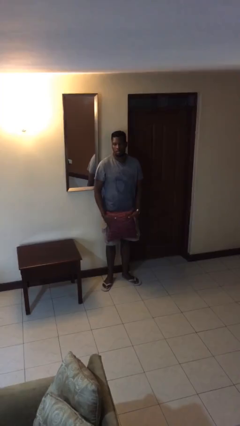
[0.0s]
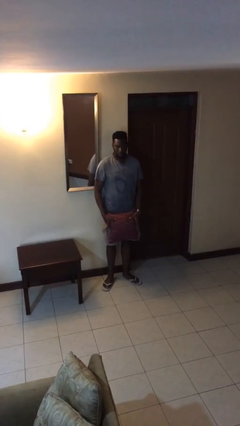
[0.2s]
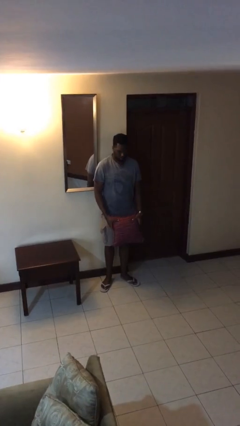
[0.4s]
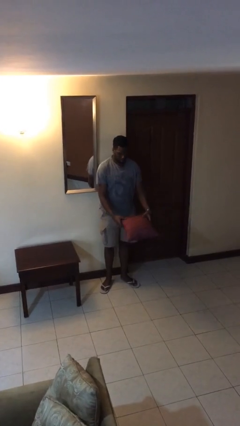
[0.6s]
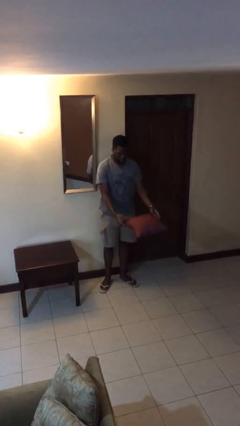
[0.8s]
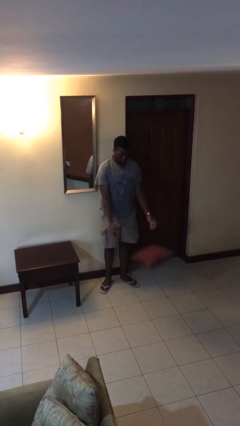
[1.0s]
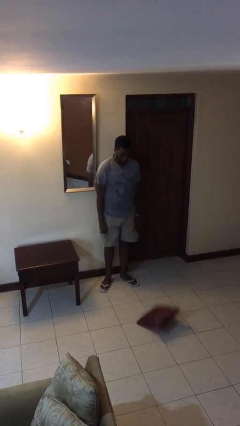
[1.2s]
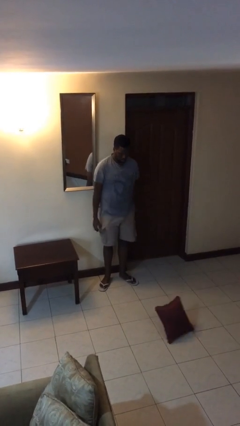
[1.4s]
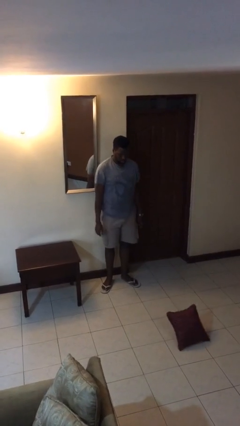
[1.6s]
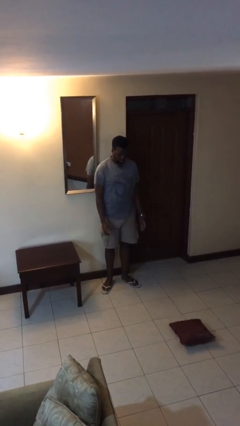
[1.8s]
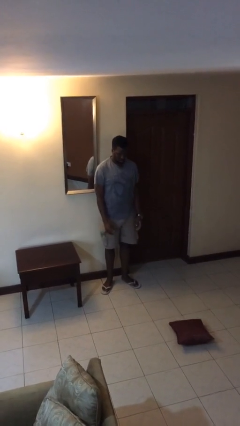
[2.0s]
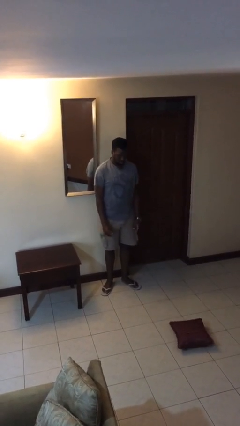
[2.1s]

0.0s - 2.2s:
person throws object to ground

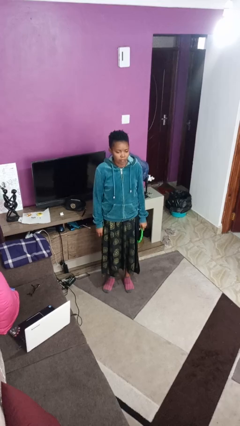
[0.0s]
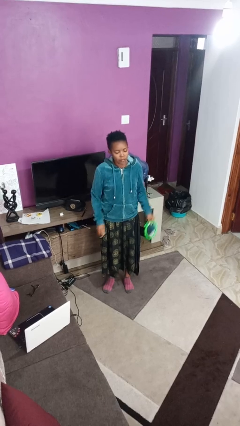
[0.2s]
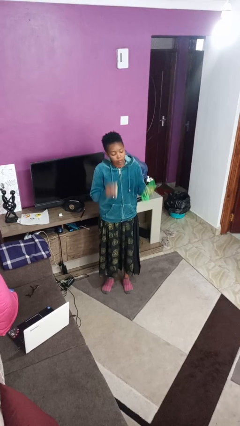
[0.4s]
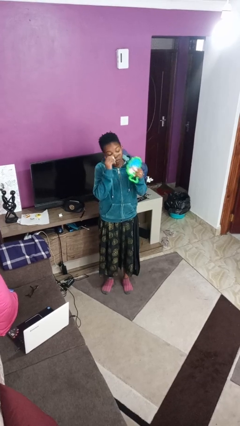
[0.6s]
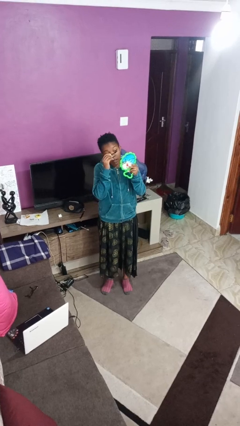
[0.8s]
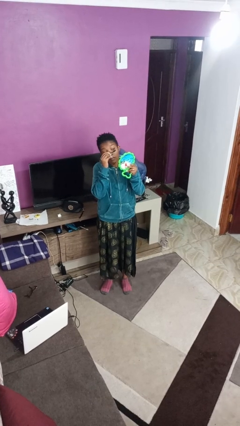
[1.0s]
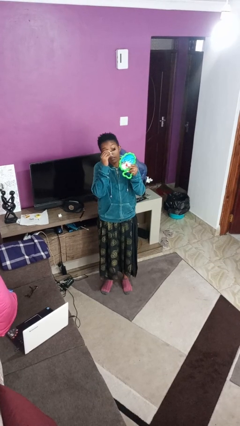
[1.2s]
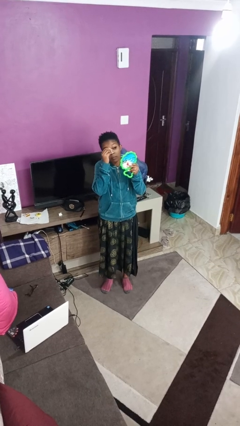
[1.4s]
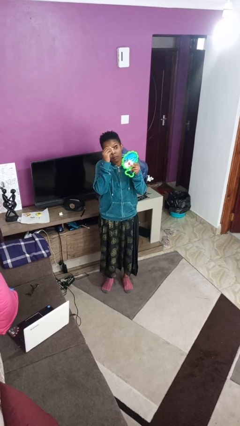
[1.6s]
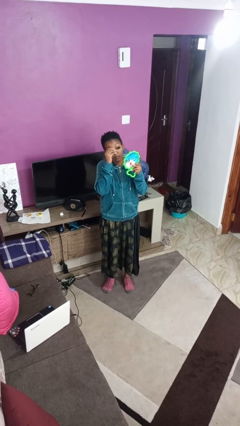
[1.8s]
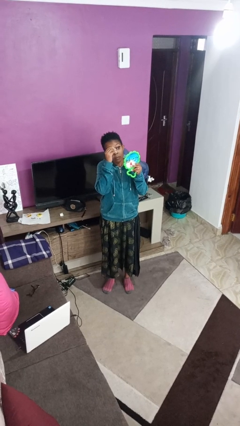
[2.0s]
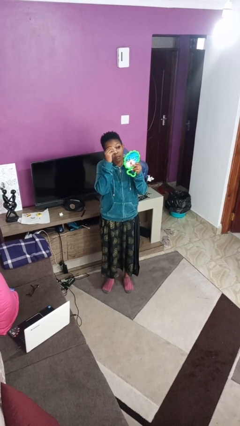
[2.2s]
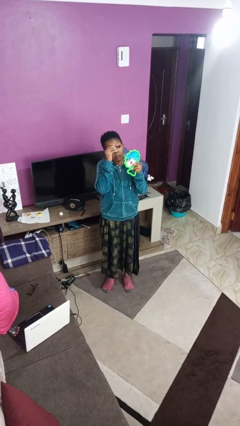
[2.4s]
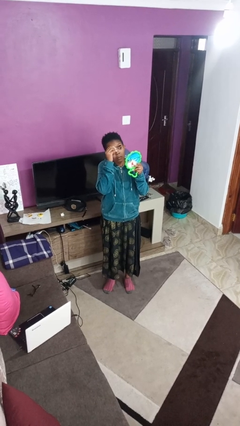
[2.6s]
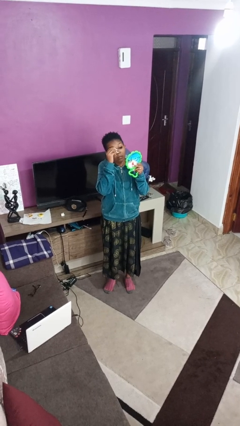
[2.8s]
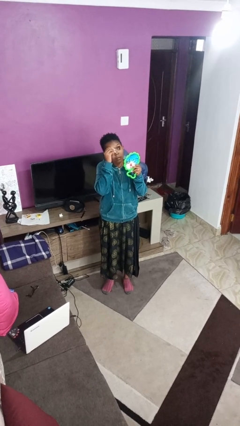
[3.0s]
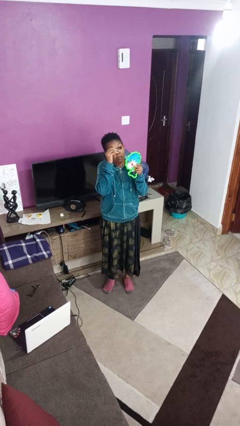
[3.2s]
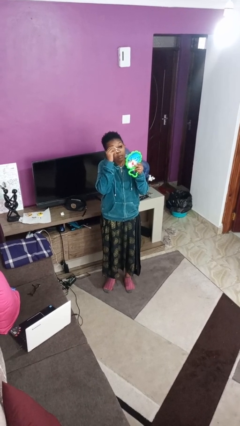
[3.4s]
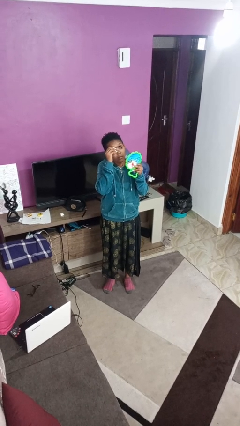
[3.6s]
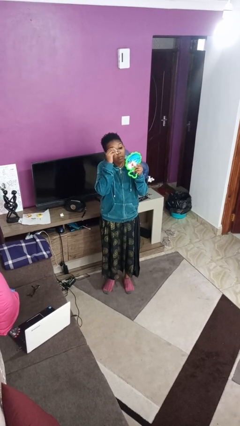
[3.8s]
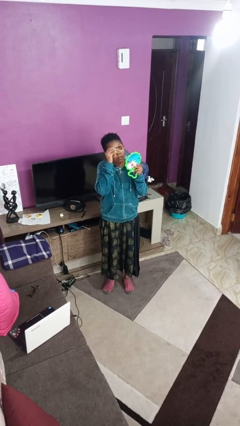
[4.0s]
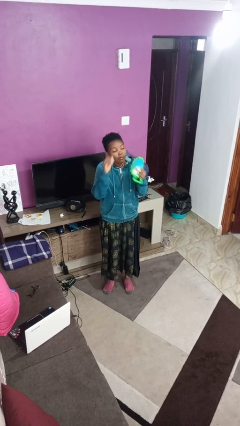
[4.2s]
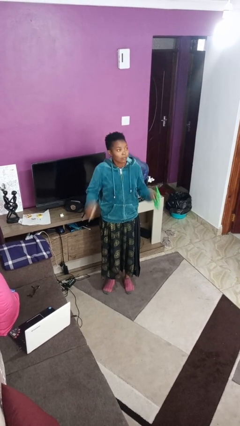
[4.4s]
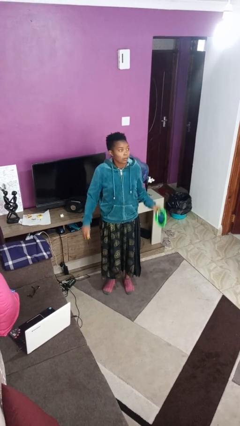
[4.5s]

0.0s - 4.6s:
person applies eye makeup

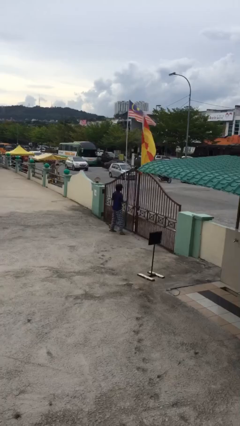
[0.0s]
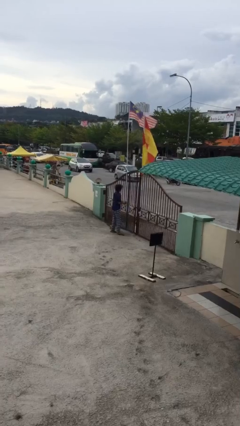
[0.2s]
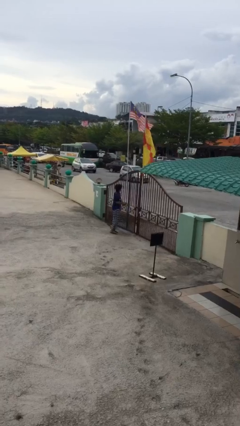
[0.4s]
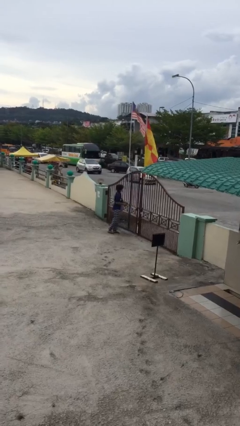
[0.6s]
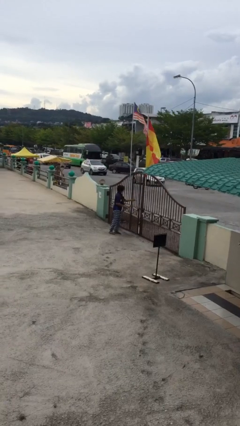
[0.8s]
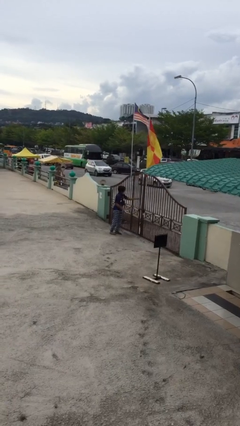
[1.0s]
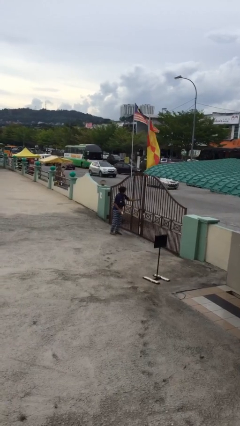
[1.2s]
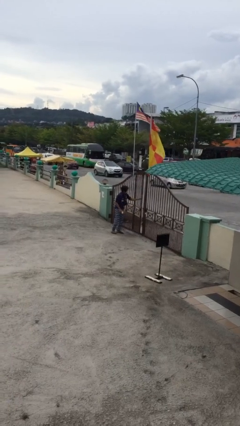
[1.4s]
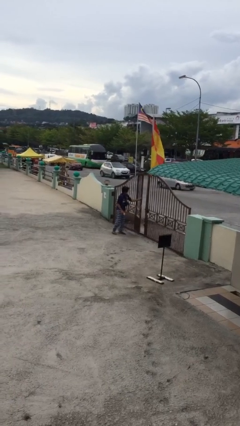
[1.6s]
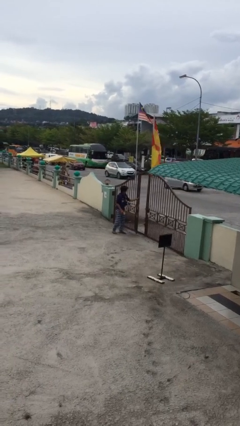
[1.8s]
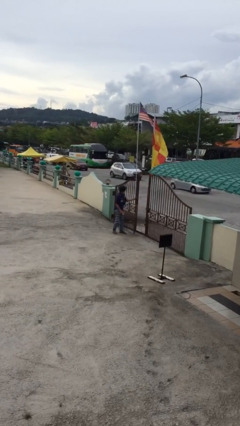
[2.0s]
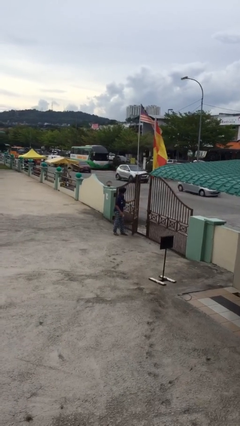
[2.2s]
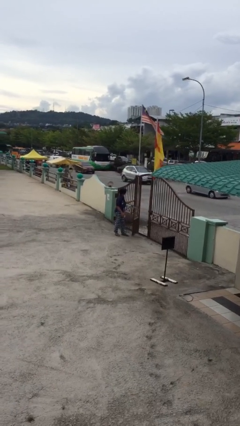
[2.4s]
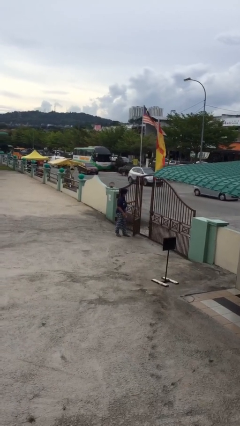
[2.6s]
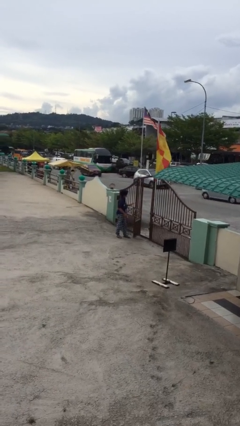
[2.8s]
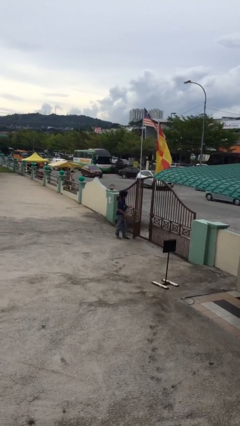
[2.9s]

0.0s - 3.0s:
person opens facility door

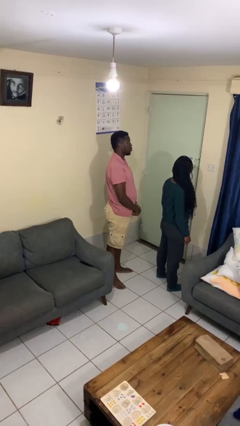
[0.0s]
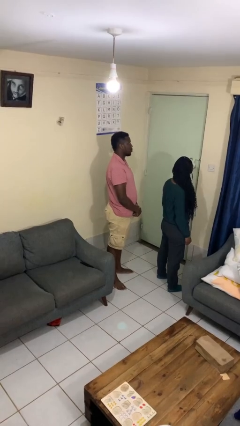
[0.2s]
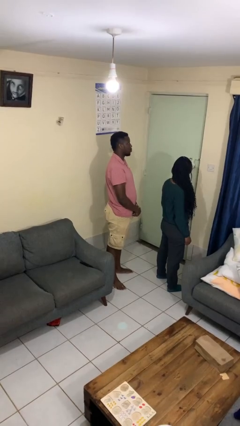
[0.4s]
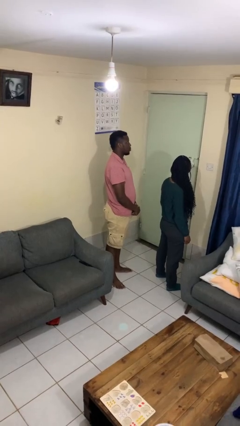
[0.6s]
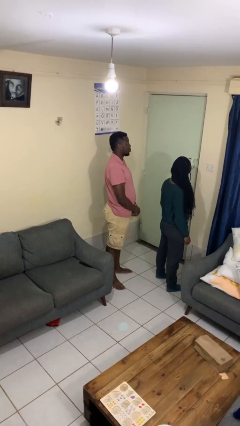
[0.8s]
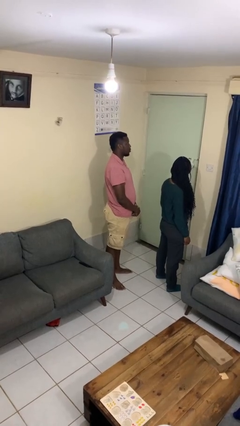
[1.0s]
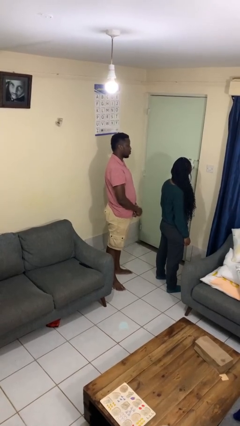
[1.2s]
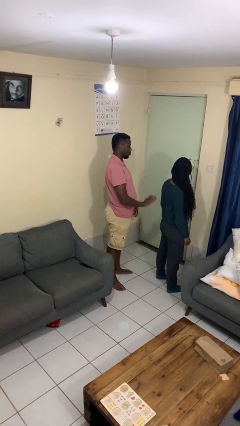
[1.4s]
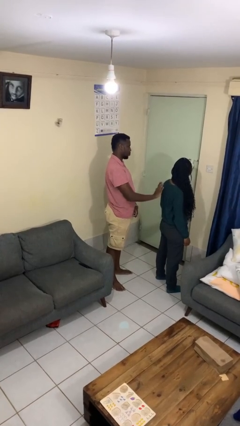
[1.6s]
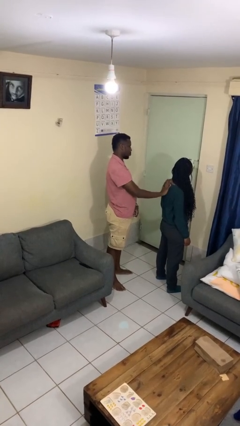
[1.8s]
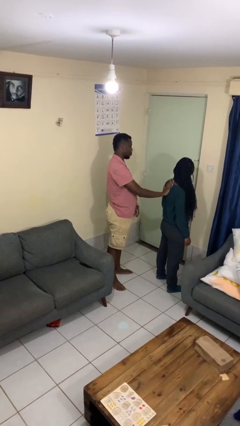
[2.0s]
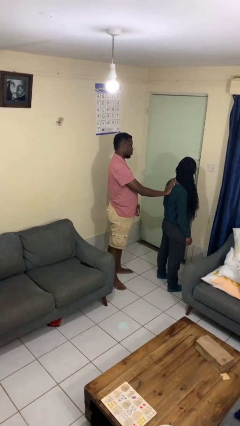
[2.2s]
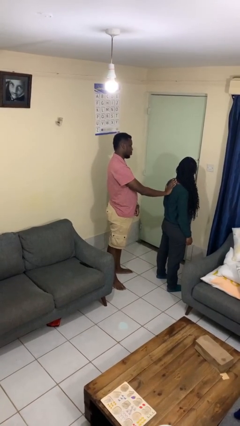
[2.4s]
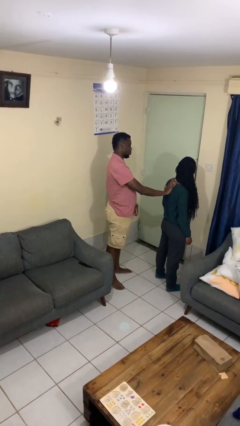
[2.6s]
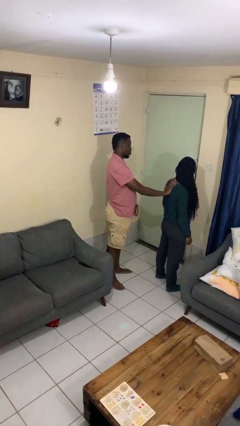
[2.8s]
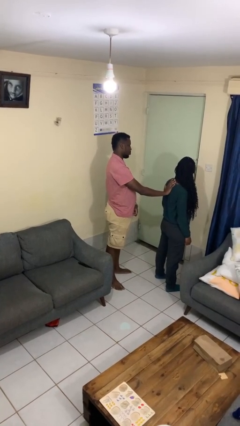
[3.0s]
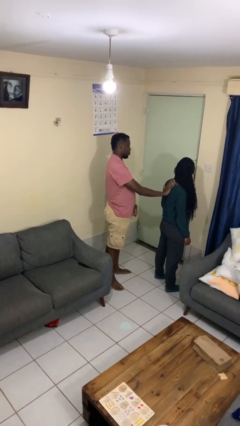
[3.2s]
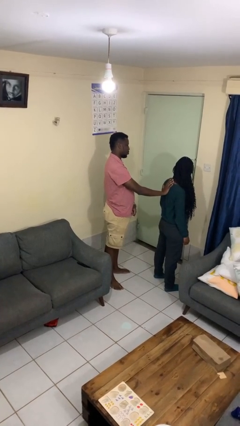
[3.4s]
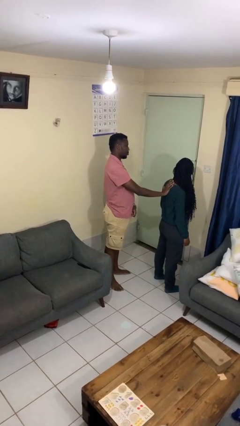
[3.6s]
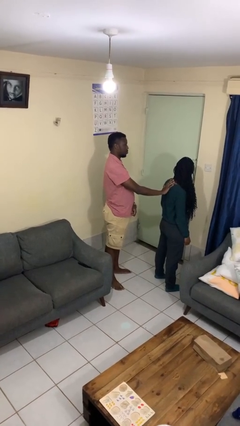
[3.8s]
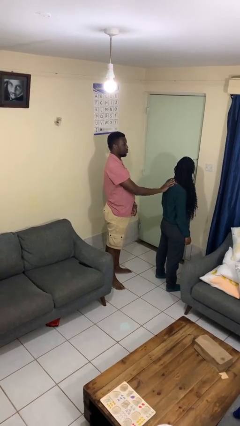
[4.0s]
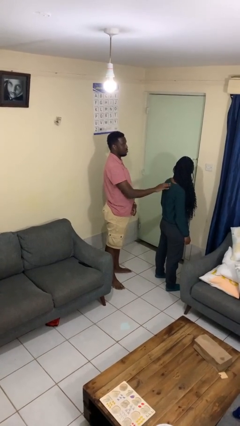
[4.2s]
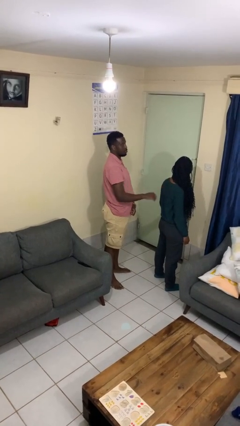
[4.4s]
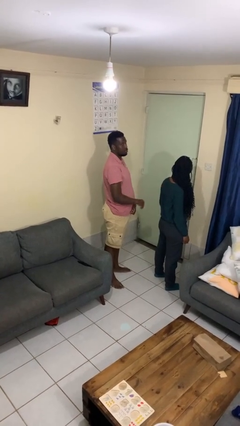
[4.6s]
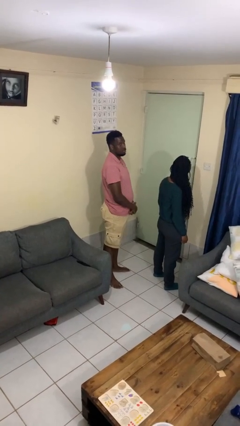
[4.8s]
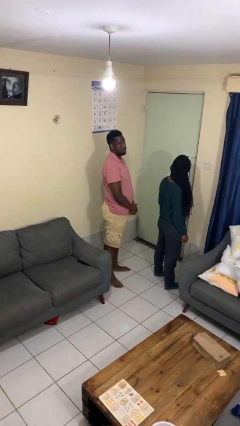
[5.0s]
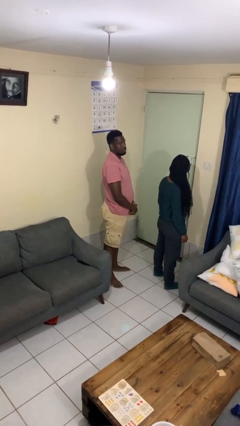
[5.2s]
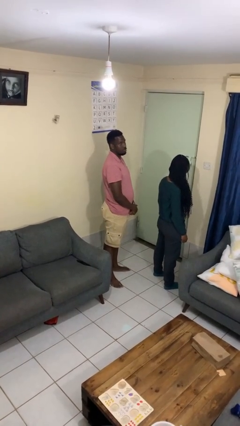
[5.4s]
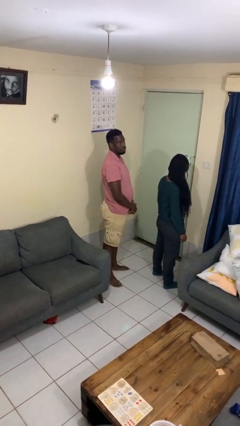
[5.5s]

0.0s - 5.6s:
person touches back of person

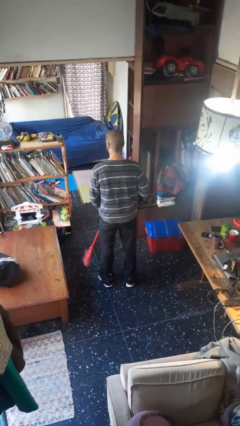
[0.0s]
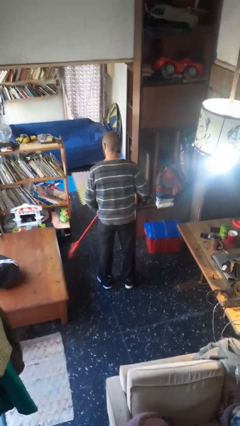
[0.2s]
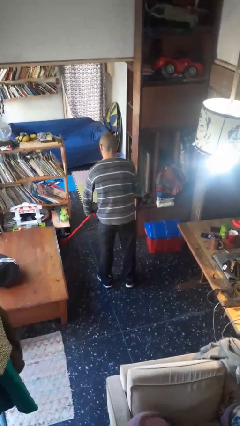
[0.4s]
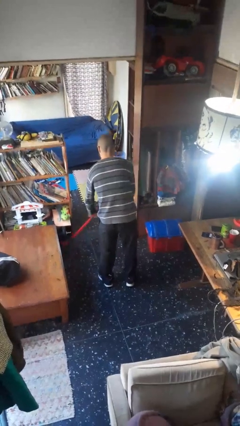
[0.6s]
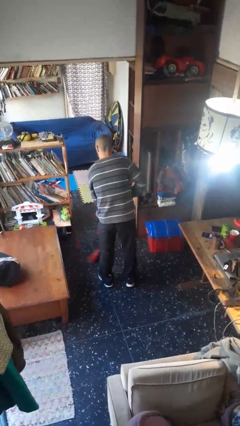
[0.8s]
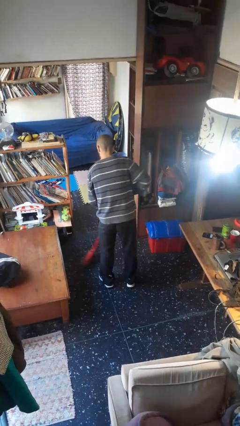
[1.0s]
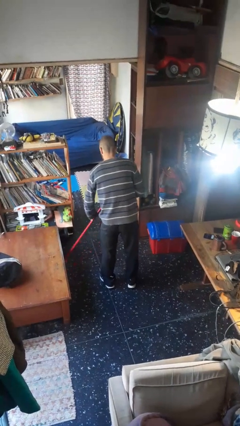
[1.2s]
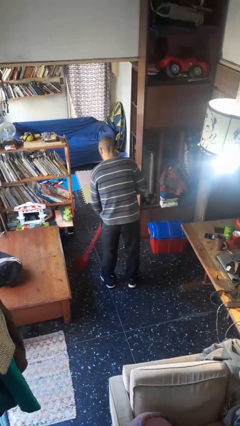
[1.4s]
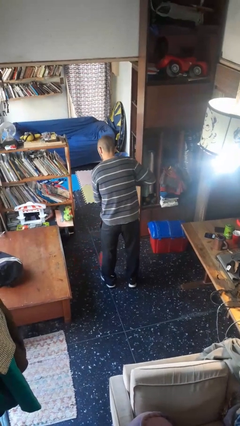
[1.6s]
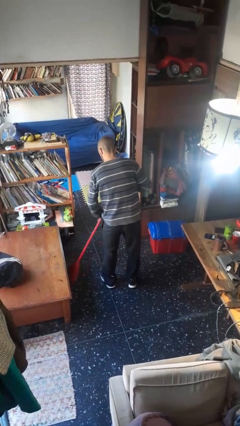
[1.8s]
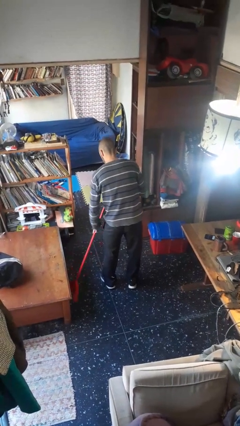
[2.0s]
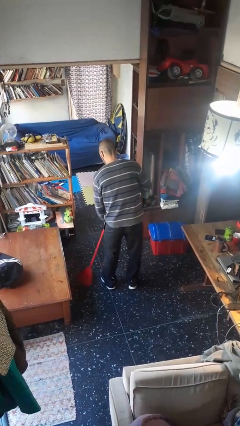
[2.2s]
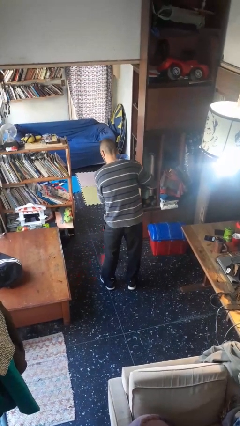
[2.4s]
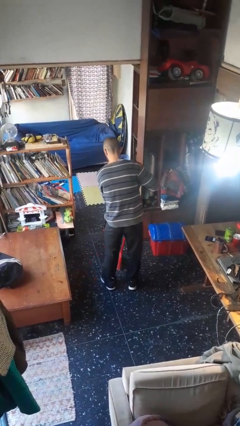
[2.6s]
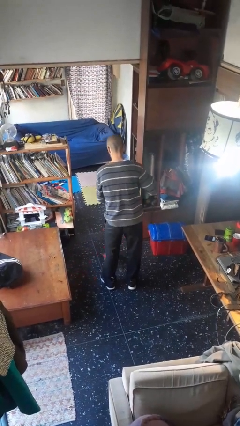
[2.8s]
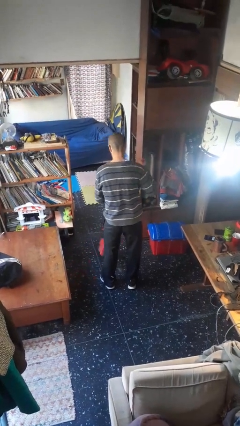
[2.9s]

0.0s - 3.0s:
person sweeps floor
